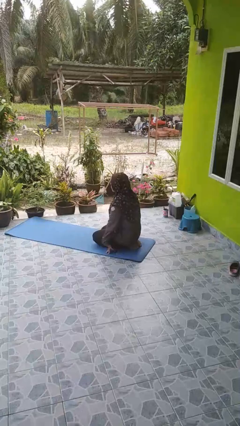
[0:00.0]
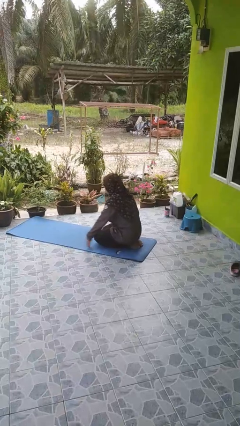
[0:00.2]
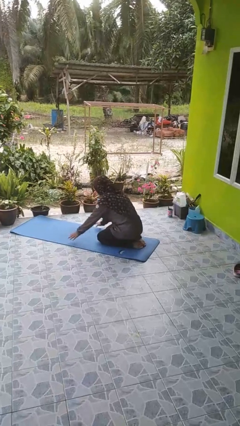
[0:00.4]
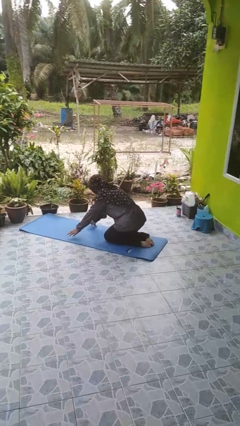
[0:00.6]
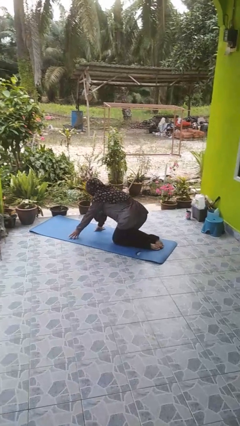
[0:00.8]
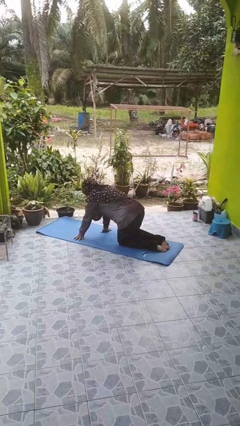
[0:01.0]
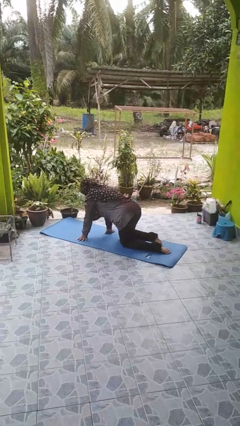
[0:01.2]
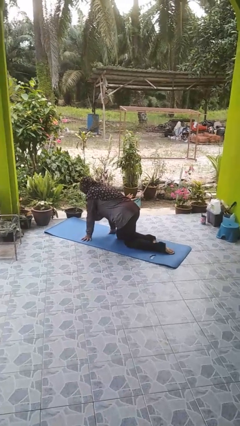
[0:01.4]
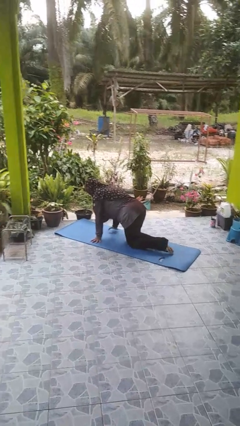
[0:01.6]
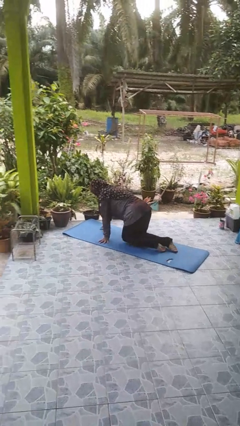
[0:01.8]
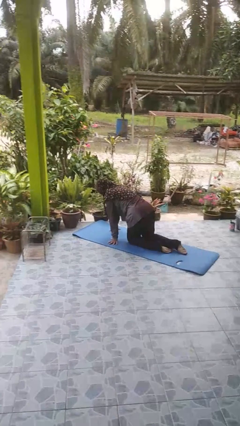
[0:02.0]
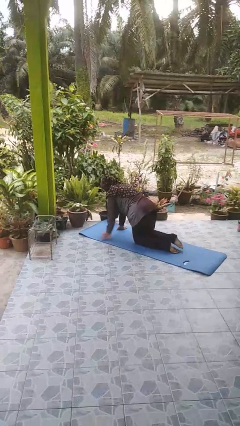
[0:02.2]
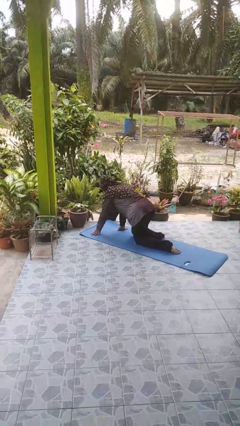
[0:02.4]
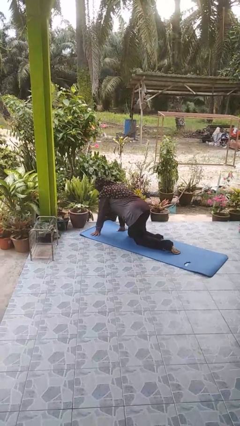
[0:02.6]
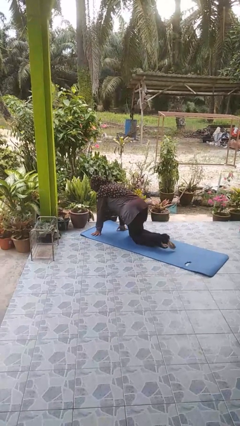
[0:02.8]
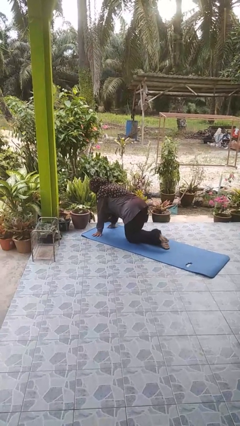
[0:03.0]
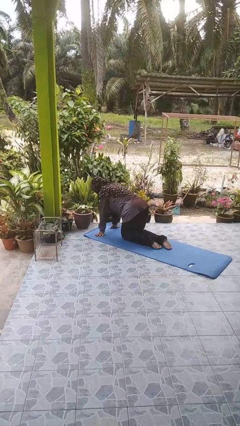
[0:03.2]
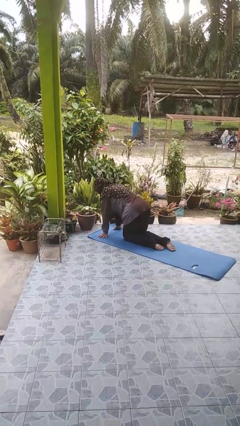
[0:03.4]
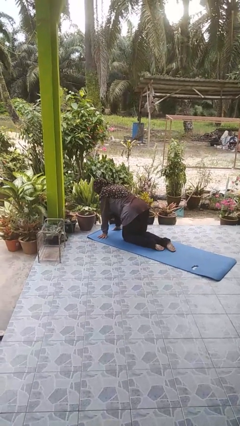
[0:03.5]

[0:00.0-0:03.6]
person crawls

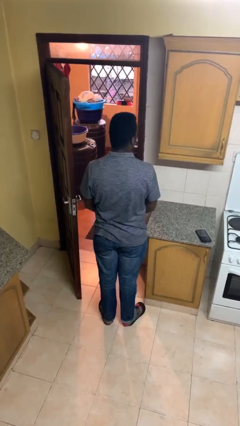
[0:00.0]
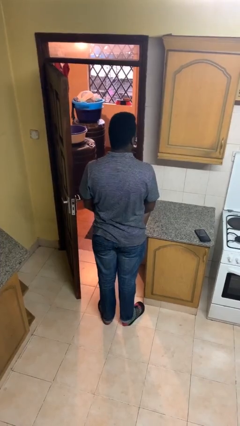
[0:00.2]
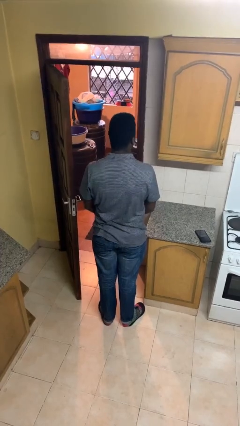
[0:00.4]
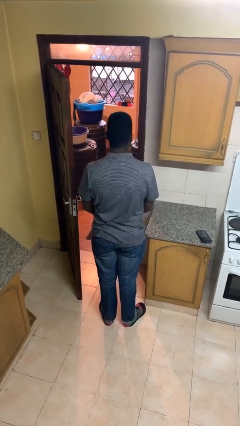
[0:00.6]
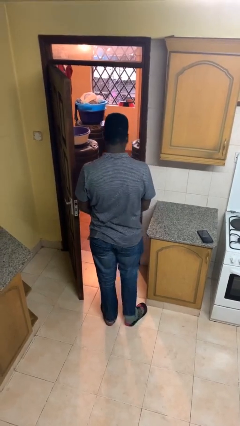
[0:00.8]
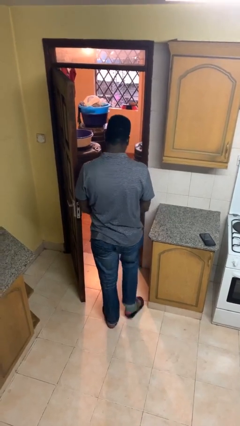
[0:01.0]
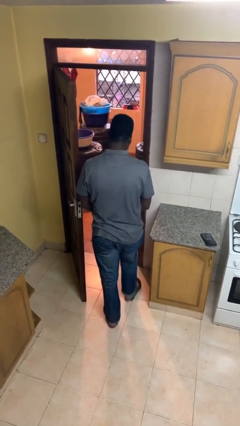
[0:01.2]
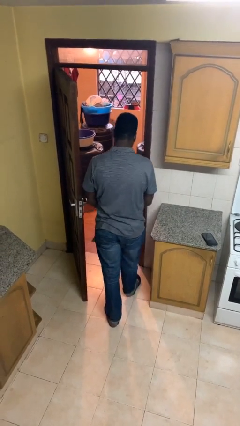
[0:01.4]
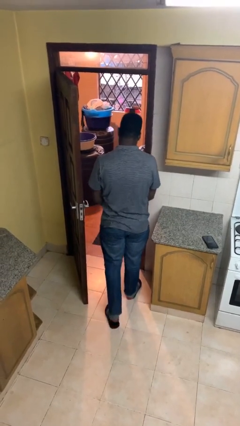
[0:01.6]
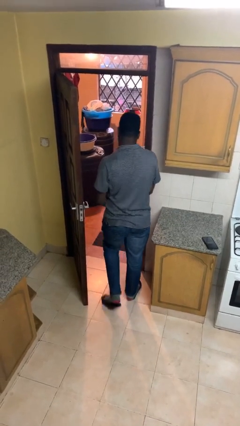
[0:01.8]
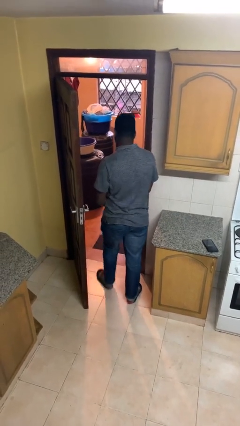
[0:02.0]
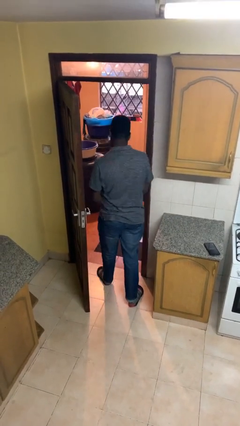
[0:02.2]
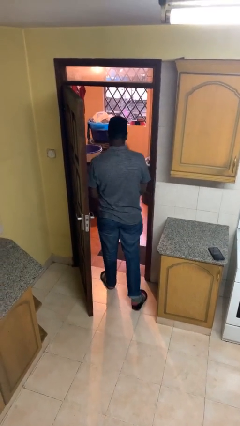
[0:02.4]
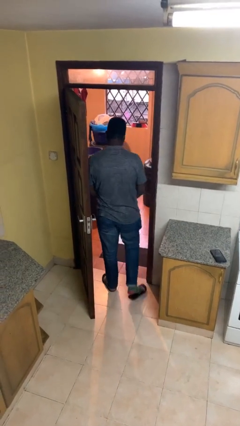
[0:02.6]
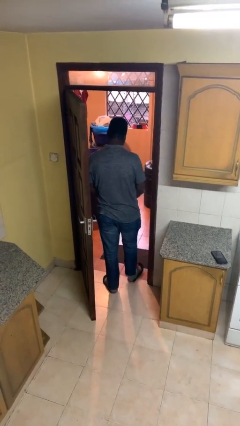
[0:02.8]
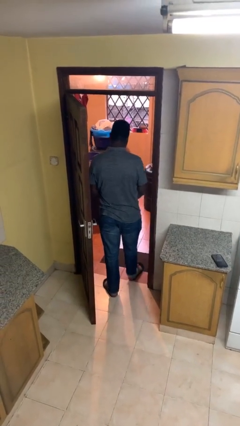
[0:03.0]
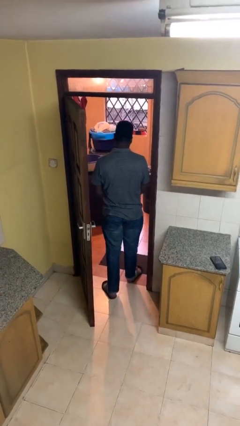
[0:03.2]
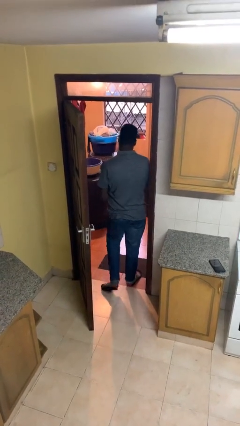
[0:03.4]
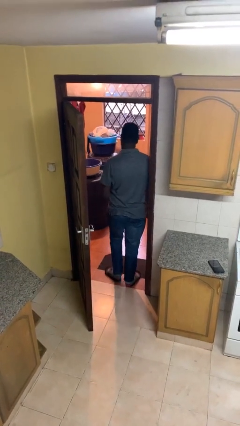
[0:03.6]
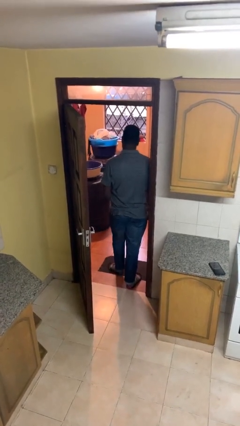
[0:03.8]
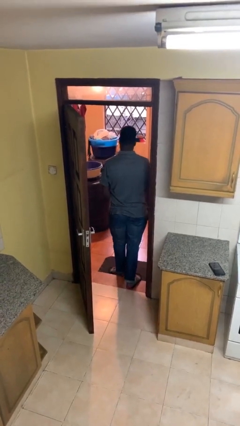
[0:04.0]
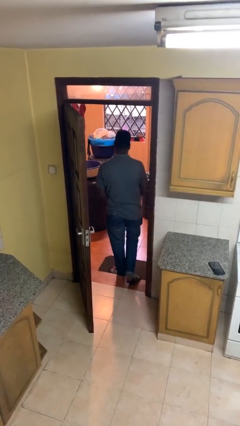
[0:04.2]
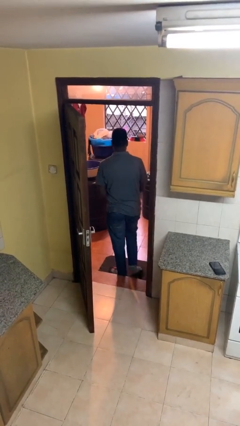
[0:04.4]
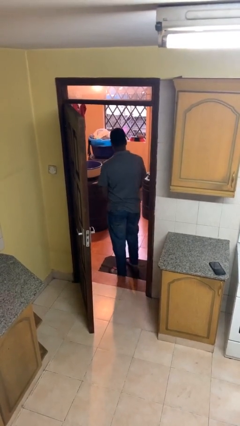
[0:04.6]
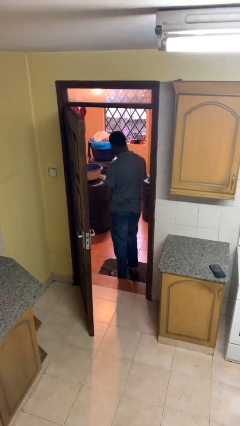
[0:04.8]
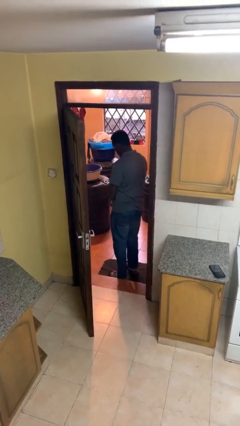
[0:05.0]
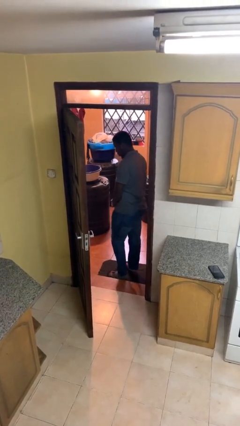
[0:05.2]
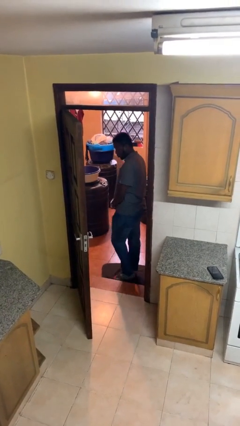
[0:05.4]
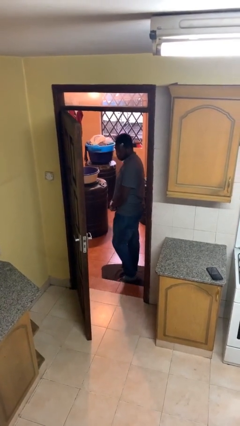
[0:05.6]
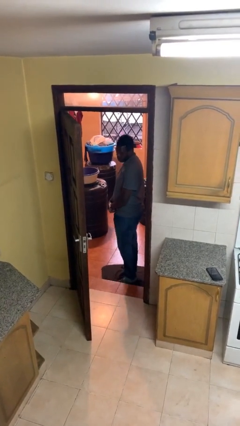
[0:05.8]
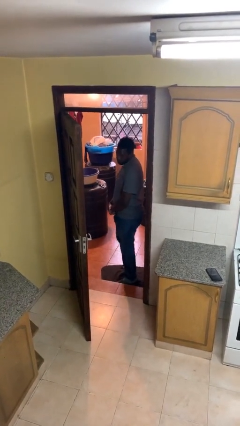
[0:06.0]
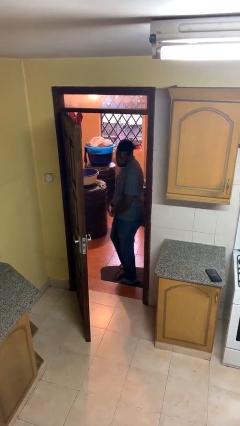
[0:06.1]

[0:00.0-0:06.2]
person exits scene through structure

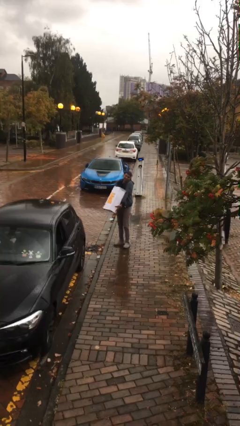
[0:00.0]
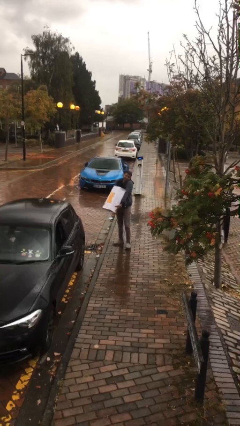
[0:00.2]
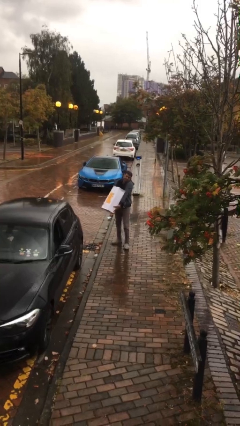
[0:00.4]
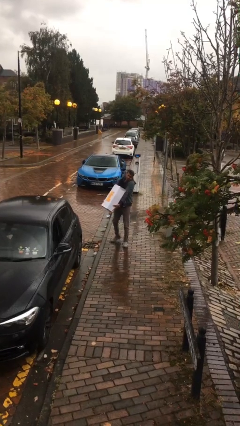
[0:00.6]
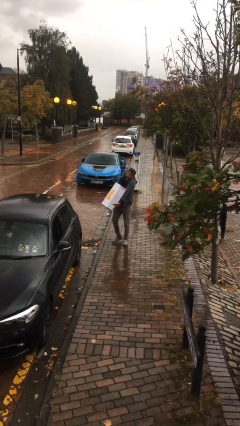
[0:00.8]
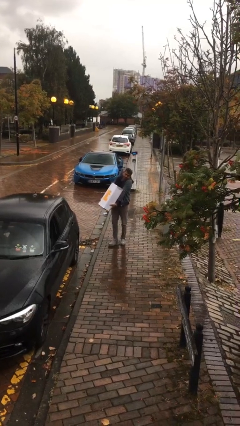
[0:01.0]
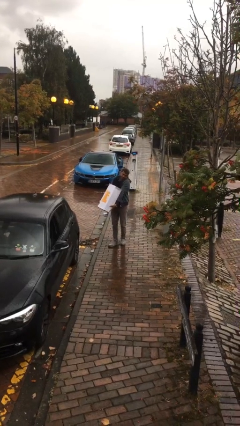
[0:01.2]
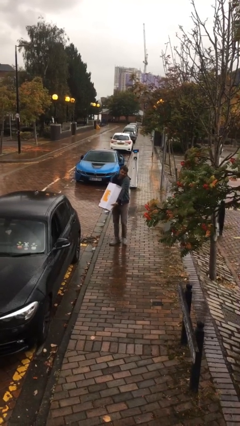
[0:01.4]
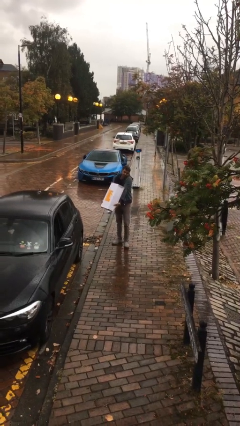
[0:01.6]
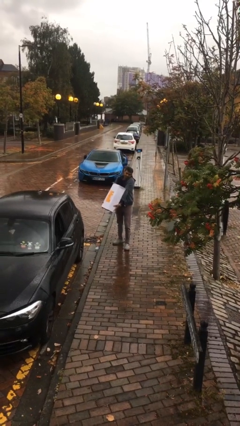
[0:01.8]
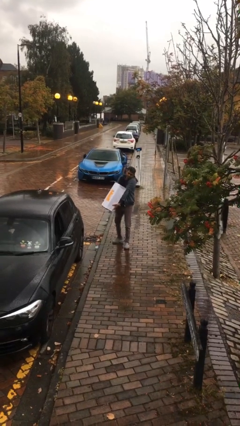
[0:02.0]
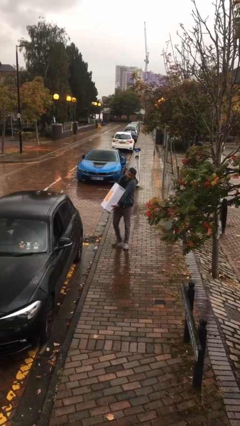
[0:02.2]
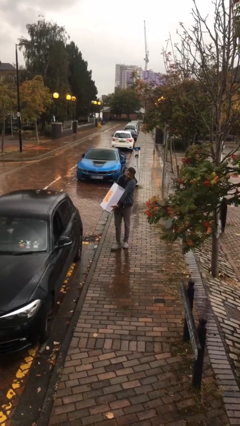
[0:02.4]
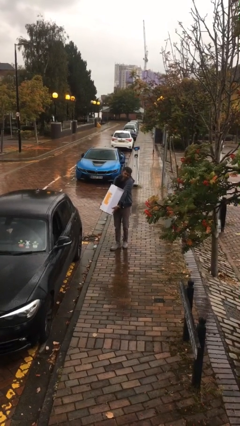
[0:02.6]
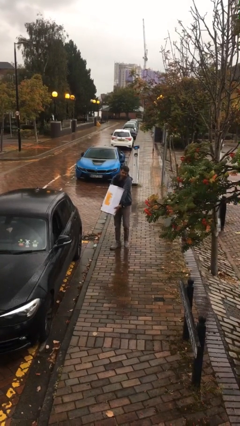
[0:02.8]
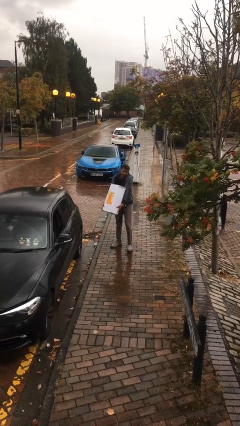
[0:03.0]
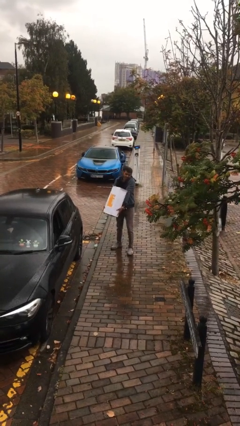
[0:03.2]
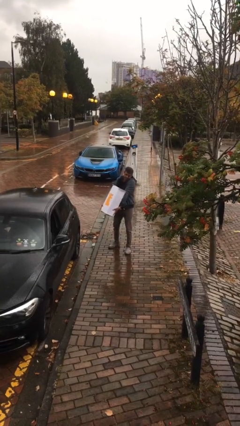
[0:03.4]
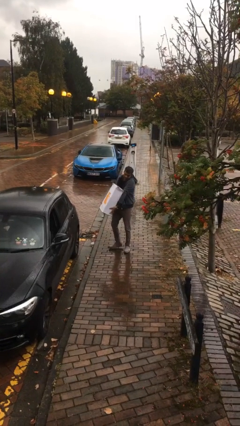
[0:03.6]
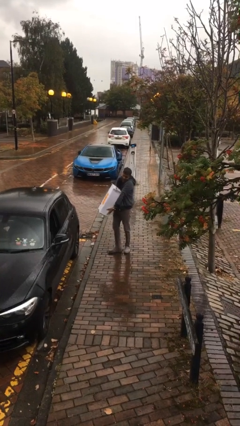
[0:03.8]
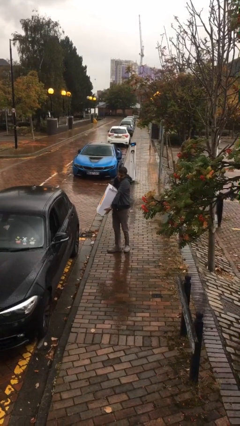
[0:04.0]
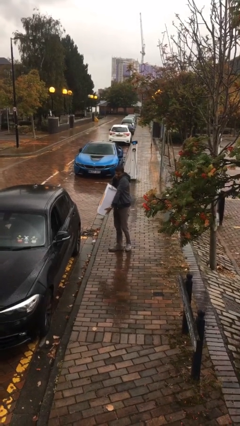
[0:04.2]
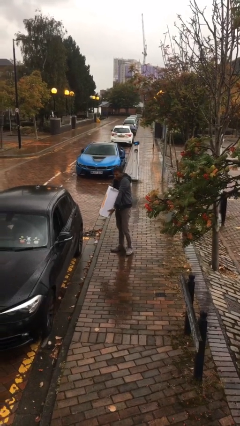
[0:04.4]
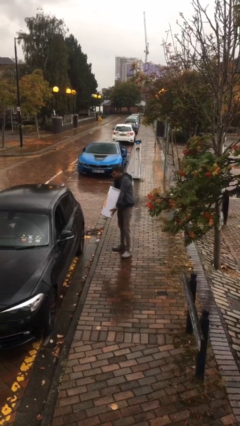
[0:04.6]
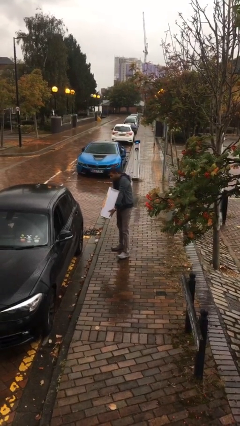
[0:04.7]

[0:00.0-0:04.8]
person carries heavy object

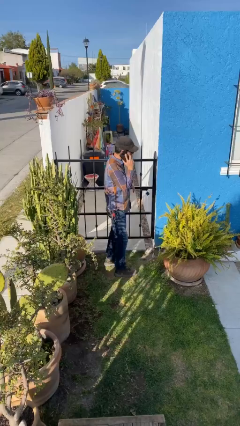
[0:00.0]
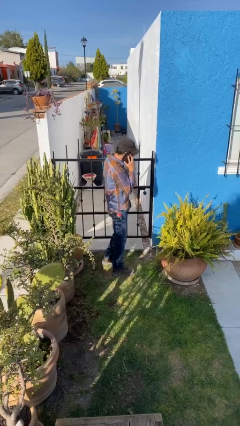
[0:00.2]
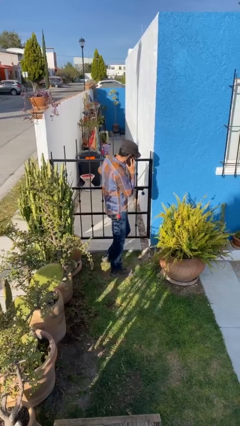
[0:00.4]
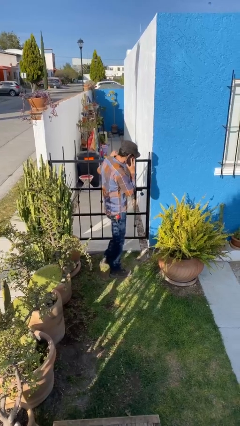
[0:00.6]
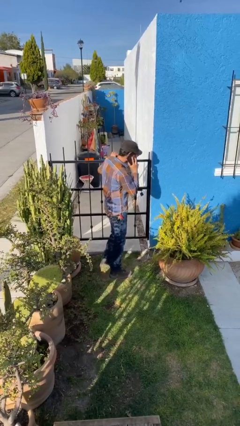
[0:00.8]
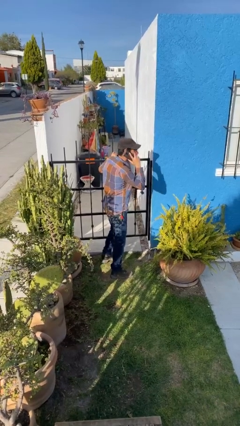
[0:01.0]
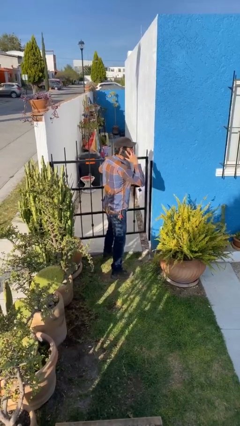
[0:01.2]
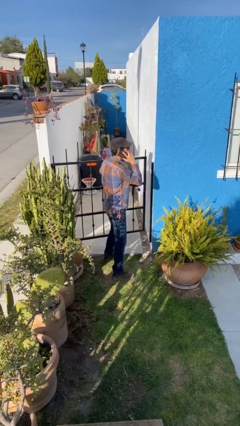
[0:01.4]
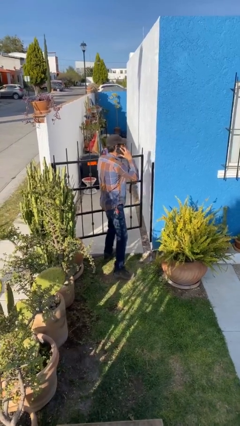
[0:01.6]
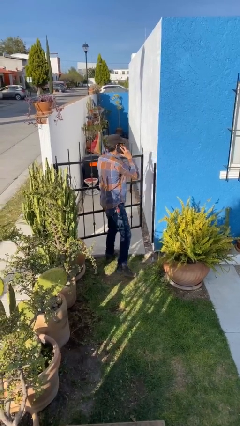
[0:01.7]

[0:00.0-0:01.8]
person opens facility door

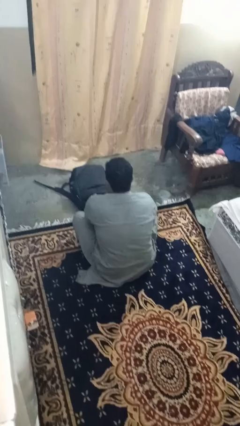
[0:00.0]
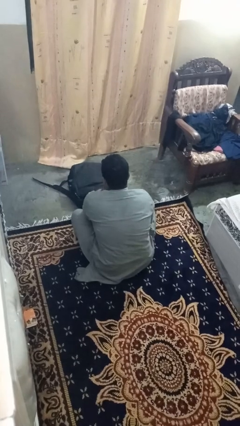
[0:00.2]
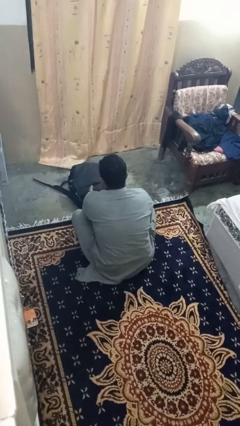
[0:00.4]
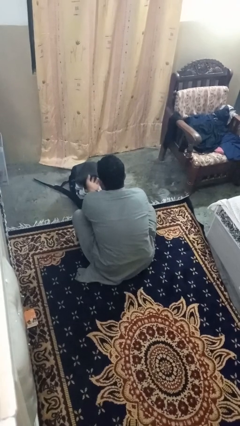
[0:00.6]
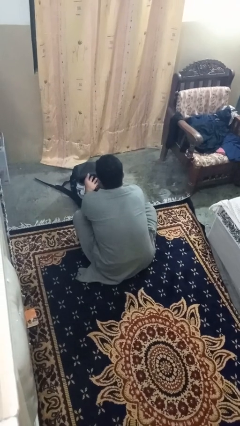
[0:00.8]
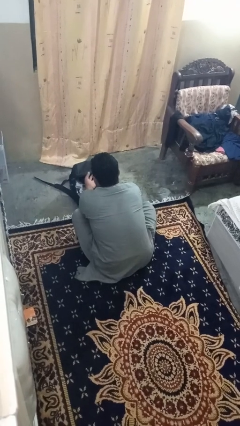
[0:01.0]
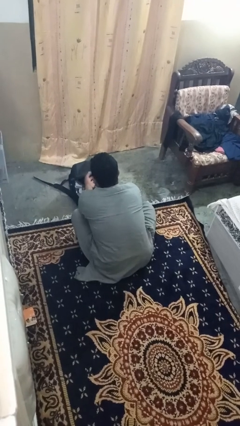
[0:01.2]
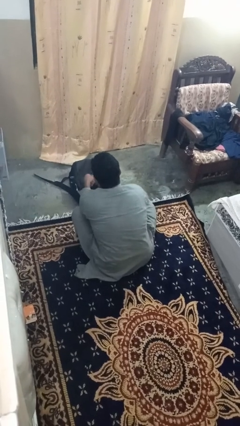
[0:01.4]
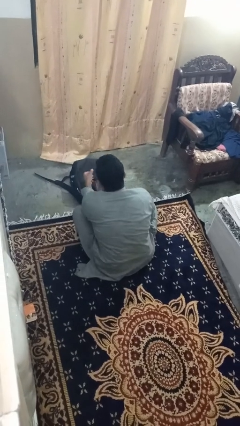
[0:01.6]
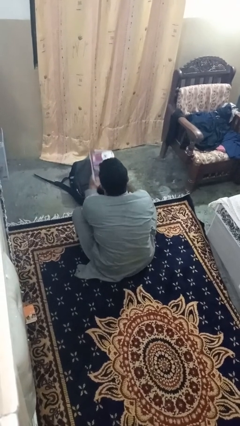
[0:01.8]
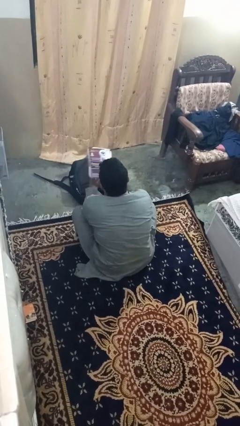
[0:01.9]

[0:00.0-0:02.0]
person takes object from bag
